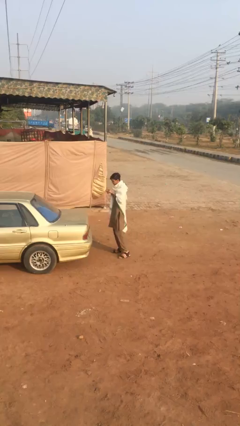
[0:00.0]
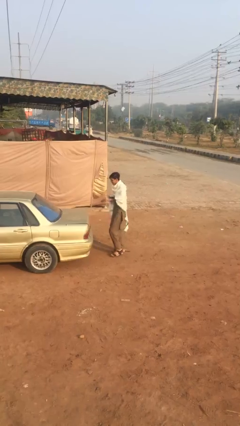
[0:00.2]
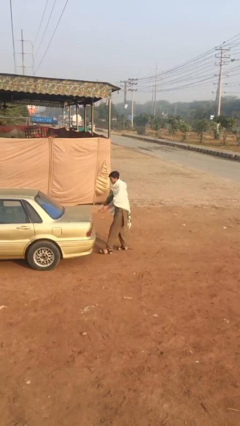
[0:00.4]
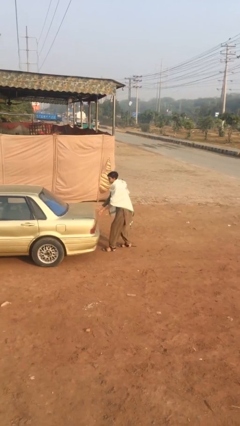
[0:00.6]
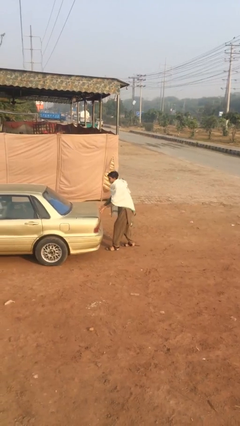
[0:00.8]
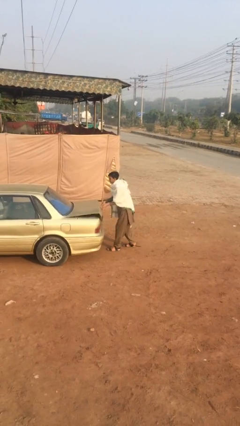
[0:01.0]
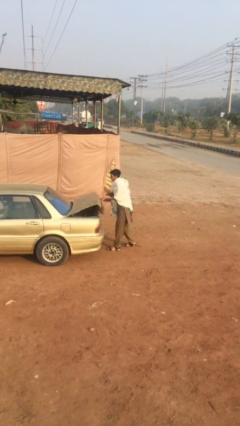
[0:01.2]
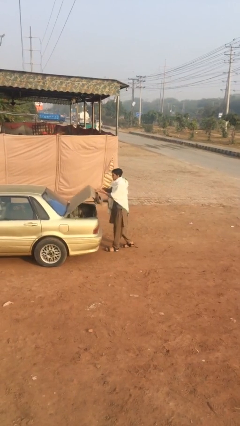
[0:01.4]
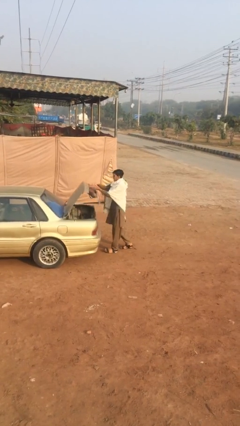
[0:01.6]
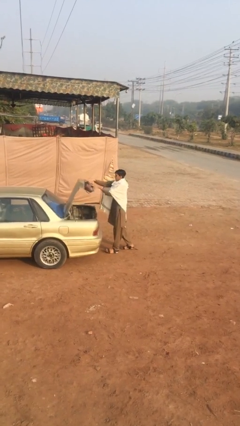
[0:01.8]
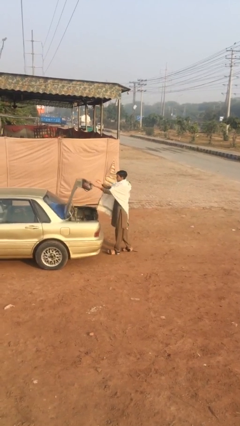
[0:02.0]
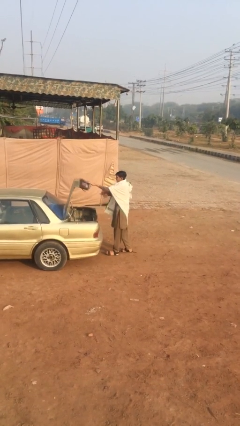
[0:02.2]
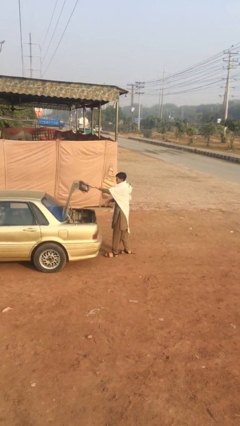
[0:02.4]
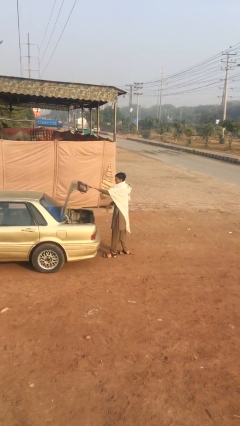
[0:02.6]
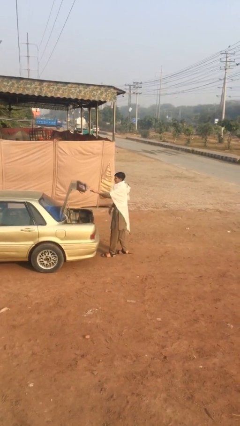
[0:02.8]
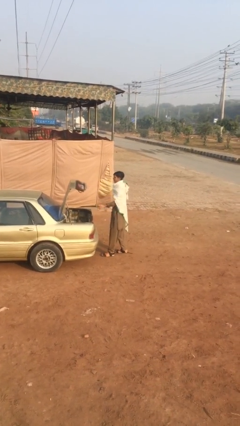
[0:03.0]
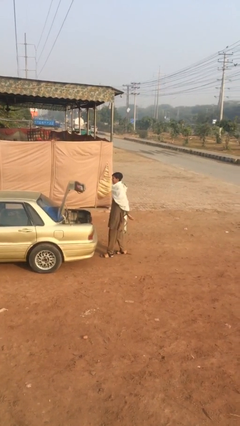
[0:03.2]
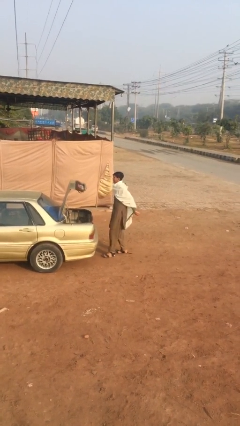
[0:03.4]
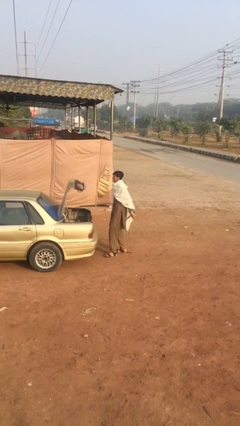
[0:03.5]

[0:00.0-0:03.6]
person opens car trunk

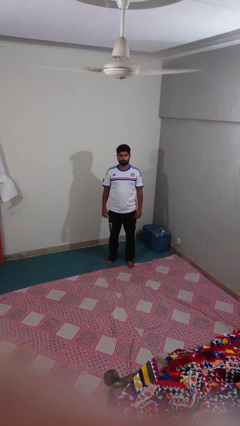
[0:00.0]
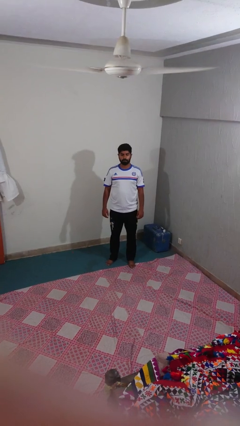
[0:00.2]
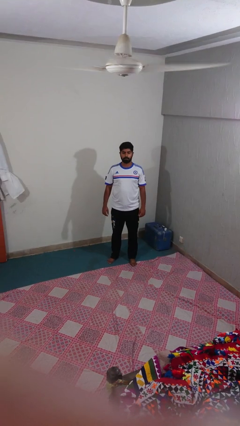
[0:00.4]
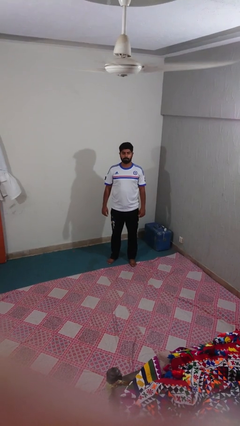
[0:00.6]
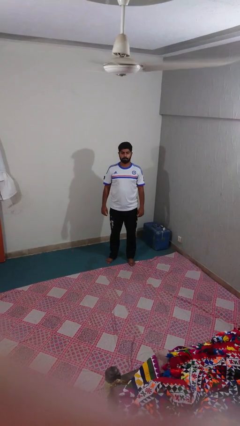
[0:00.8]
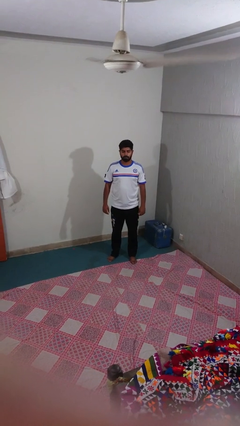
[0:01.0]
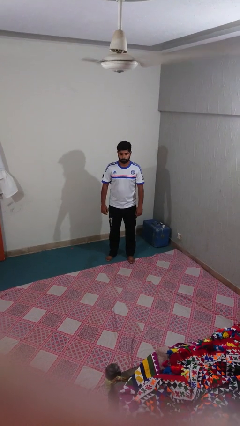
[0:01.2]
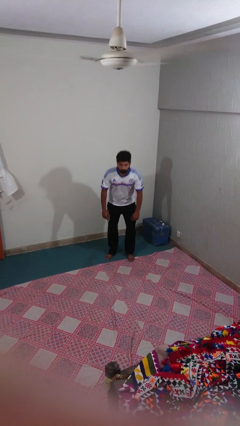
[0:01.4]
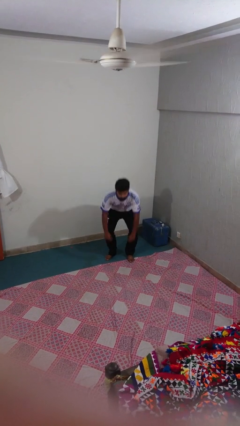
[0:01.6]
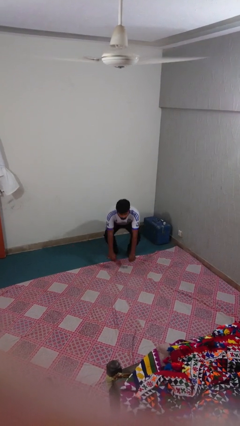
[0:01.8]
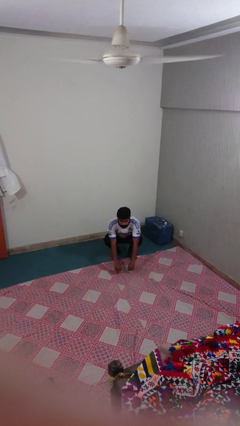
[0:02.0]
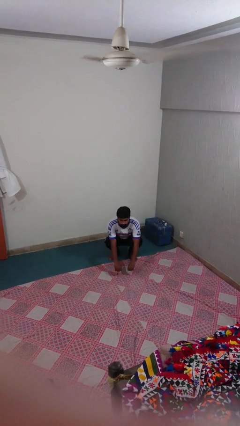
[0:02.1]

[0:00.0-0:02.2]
person squats

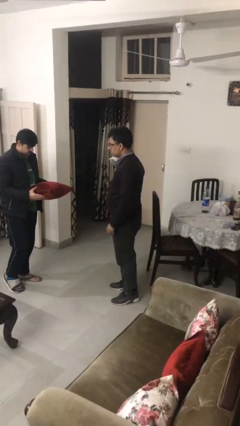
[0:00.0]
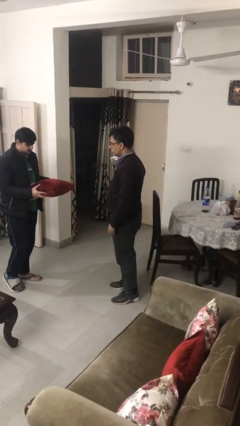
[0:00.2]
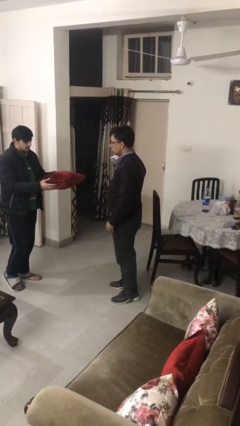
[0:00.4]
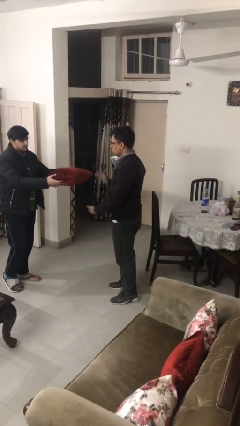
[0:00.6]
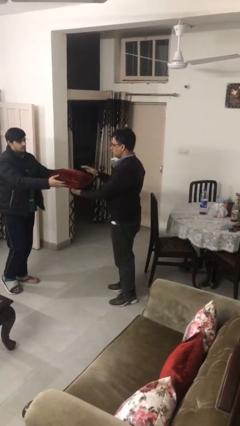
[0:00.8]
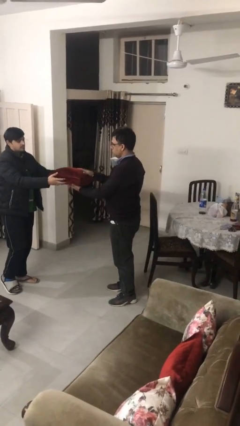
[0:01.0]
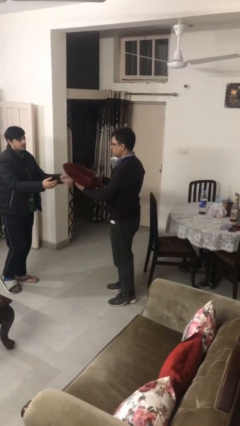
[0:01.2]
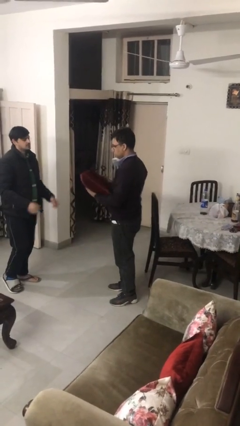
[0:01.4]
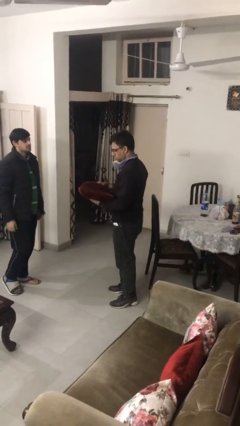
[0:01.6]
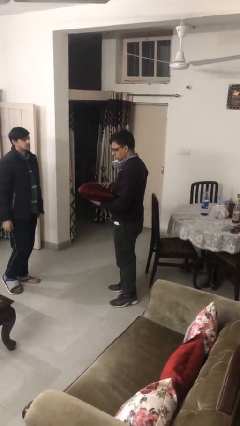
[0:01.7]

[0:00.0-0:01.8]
person transfers object to person

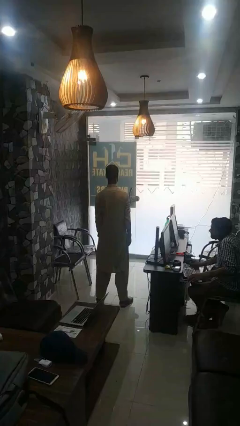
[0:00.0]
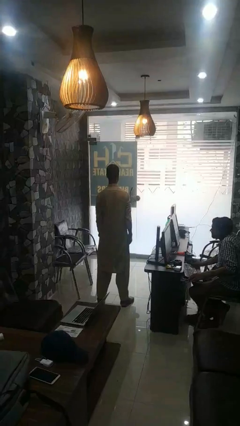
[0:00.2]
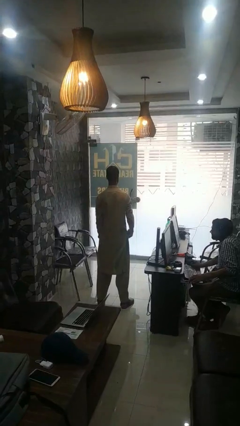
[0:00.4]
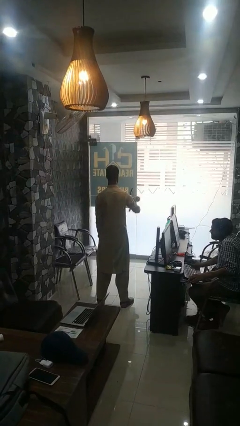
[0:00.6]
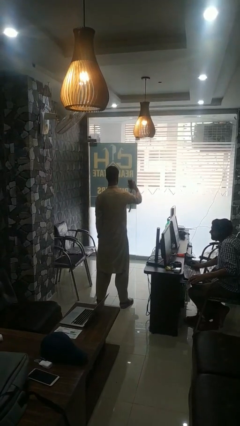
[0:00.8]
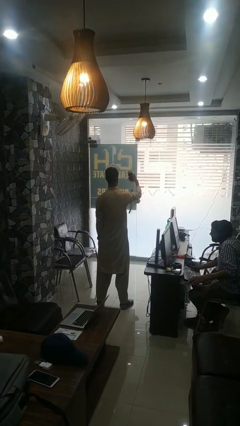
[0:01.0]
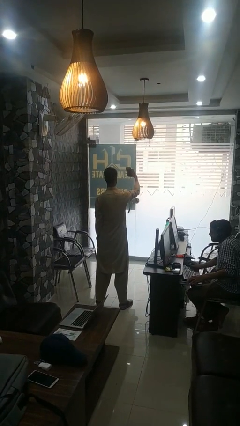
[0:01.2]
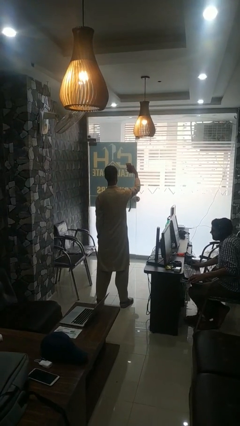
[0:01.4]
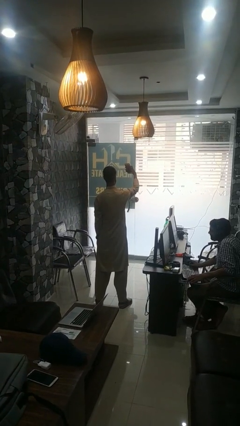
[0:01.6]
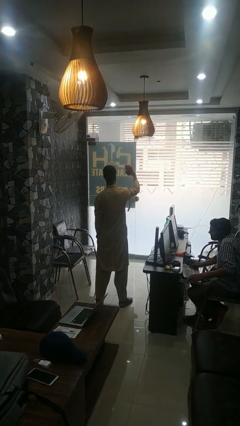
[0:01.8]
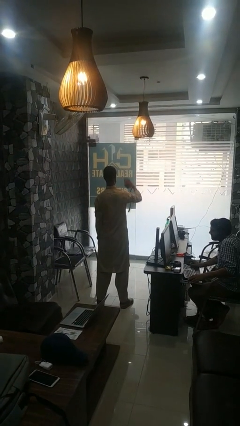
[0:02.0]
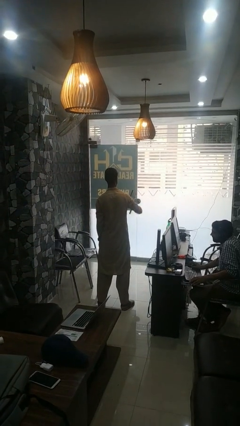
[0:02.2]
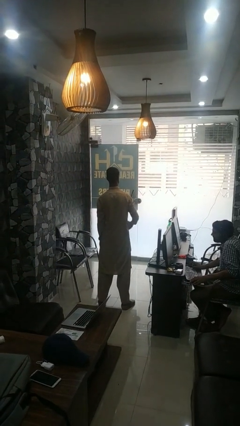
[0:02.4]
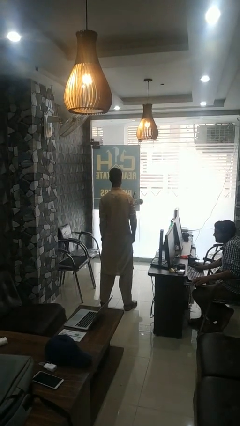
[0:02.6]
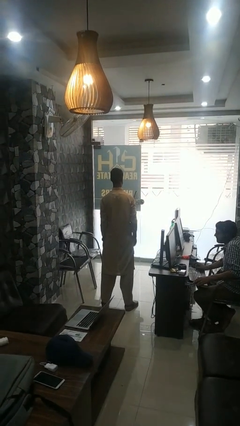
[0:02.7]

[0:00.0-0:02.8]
person takes selfie

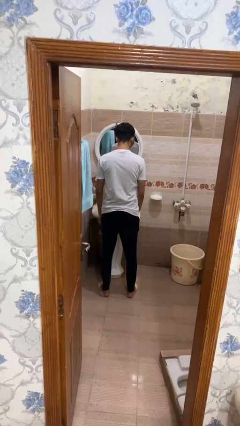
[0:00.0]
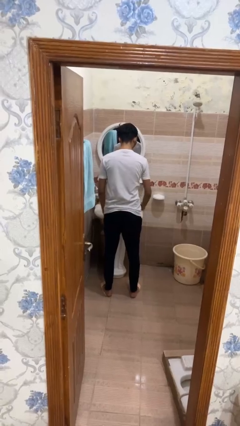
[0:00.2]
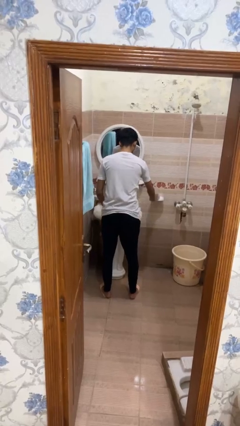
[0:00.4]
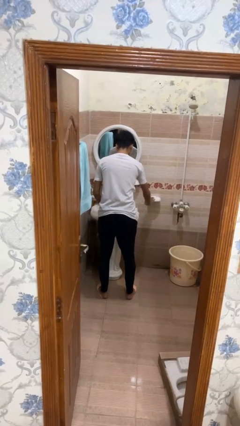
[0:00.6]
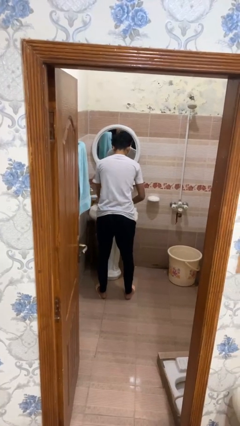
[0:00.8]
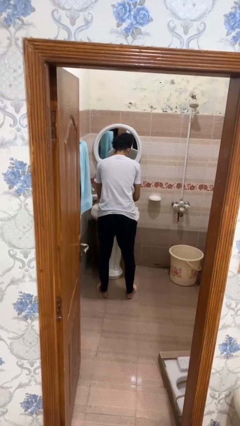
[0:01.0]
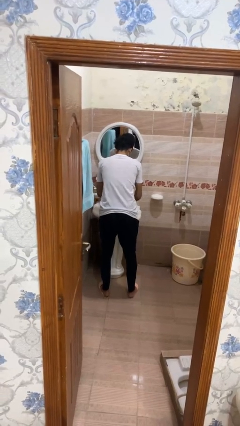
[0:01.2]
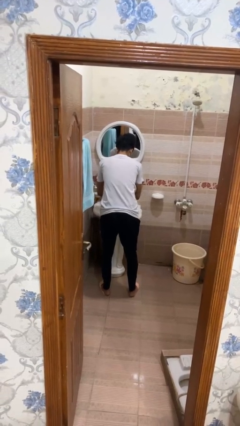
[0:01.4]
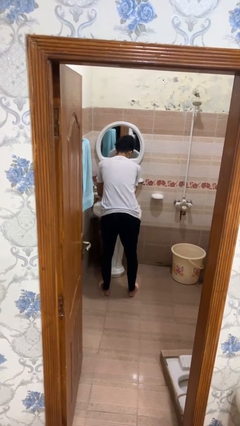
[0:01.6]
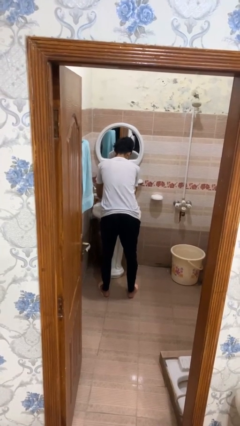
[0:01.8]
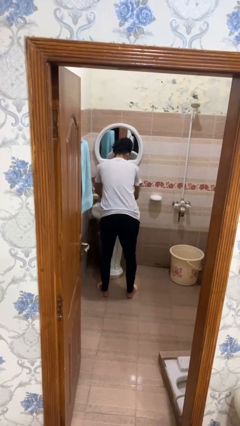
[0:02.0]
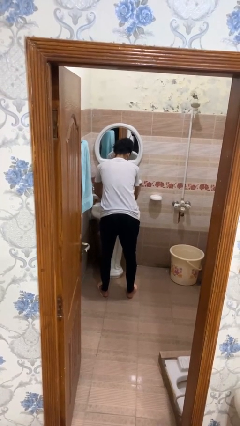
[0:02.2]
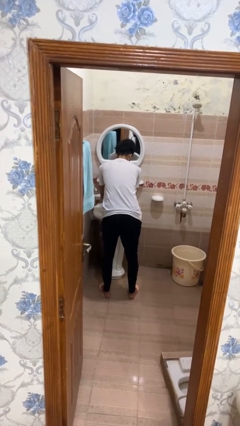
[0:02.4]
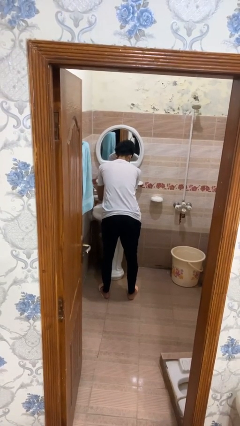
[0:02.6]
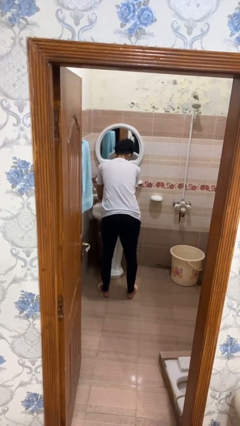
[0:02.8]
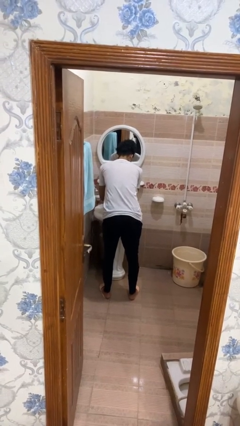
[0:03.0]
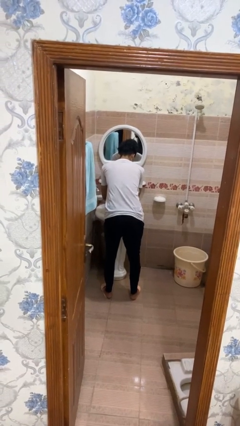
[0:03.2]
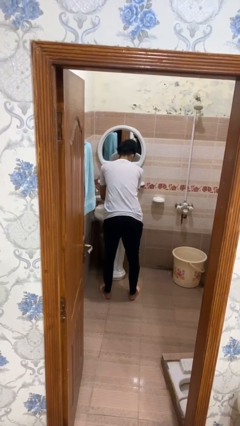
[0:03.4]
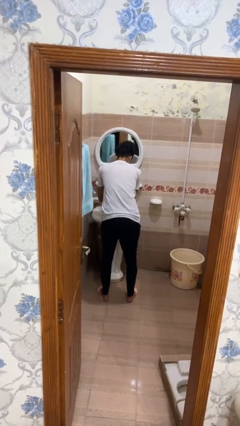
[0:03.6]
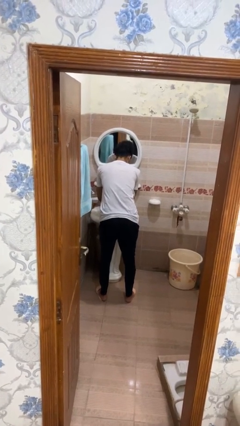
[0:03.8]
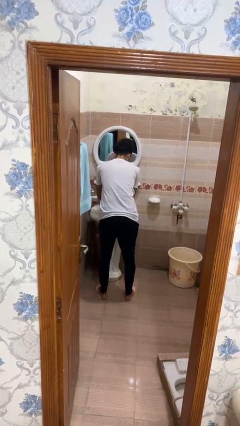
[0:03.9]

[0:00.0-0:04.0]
person washes hands

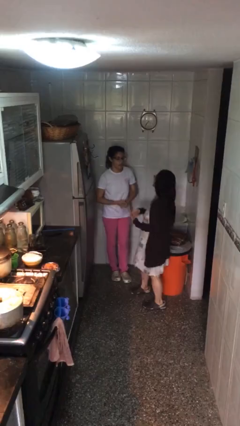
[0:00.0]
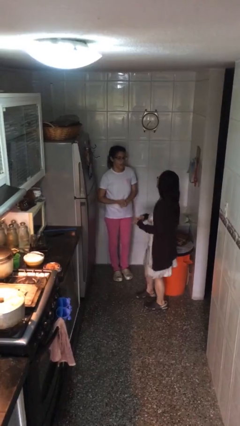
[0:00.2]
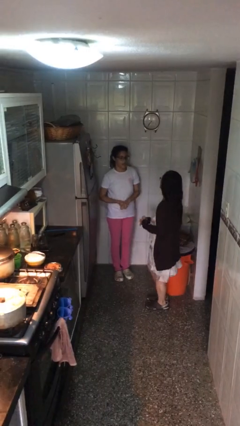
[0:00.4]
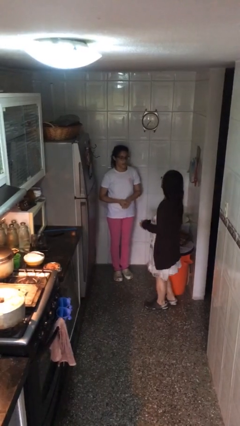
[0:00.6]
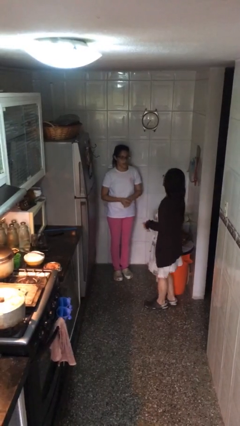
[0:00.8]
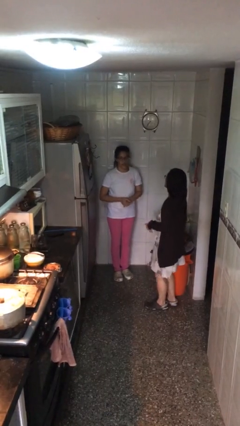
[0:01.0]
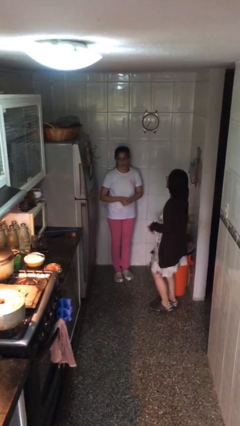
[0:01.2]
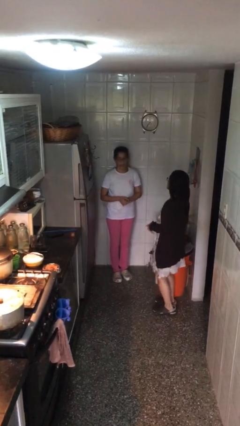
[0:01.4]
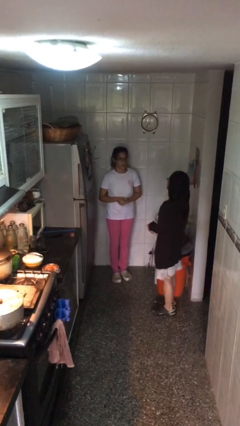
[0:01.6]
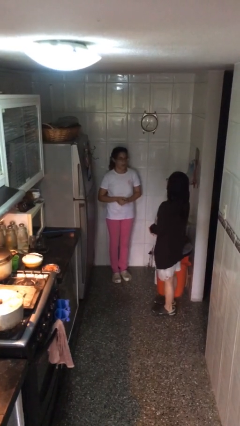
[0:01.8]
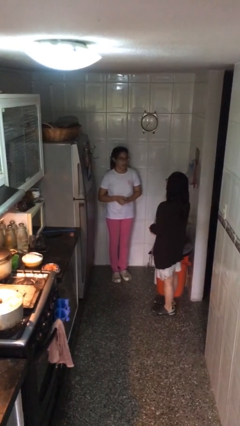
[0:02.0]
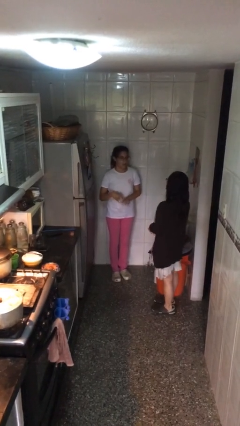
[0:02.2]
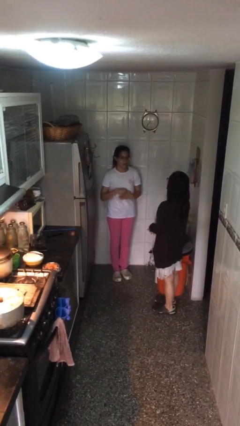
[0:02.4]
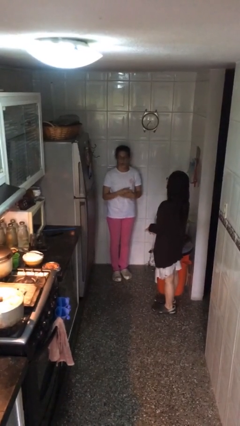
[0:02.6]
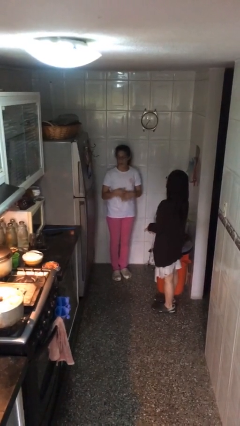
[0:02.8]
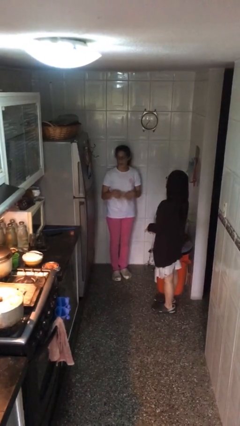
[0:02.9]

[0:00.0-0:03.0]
person talks to person

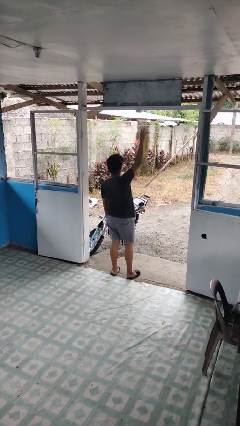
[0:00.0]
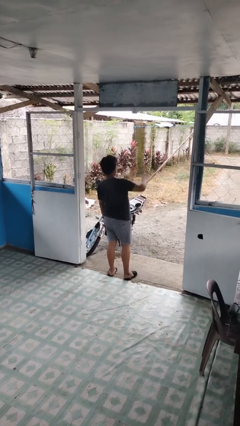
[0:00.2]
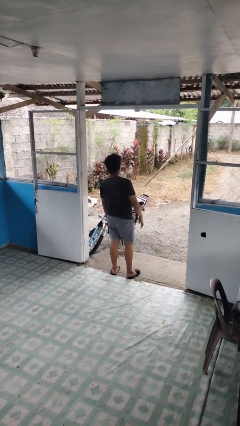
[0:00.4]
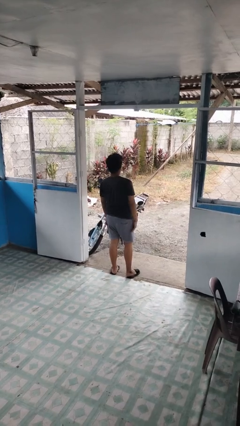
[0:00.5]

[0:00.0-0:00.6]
person gestures lower hand
